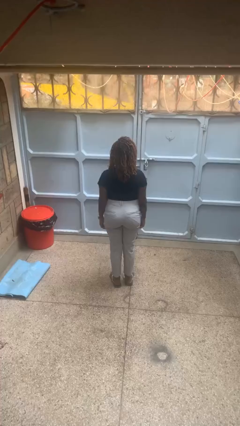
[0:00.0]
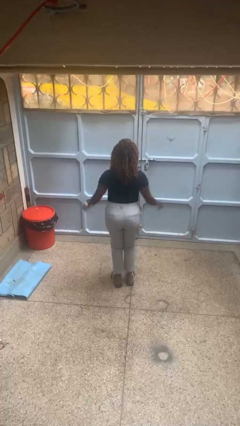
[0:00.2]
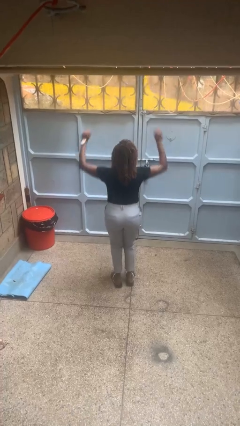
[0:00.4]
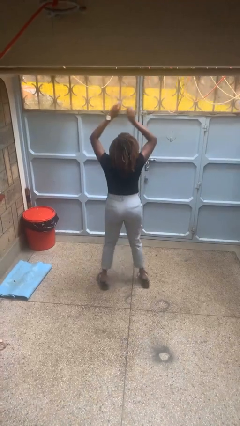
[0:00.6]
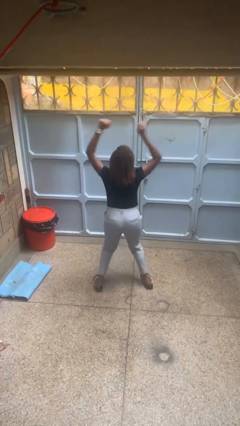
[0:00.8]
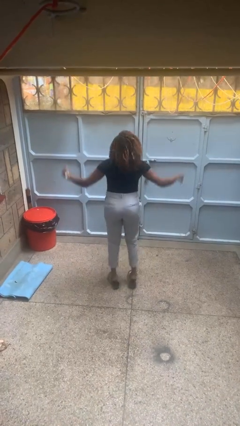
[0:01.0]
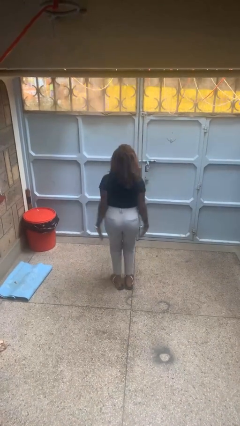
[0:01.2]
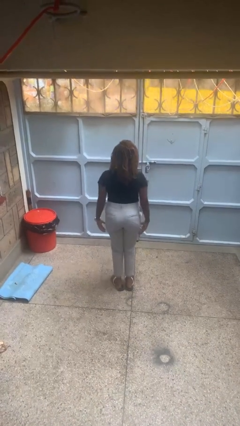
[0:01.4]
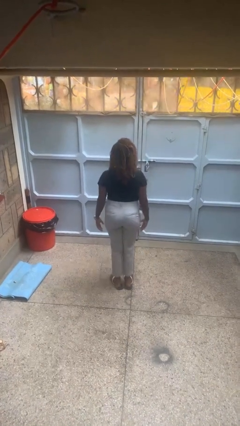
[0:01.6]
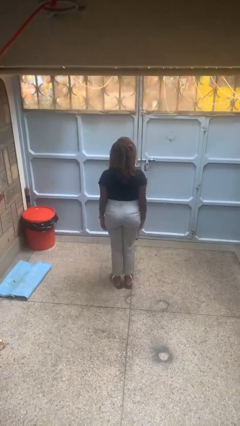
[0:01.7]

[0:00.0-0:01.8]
person exercises with jumping jacks

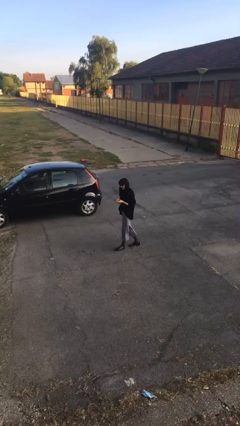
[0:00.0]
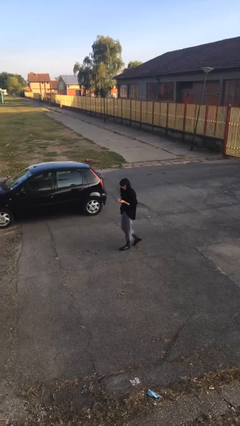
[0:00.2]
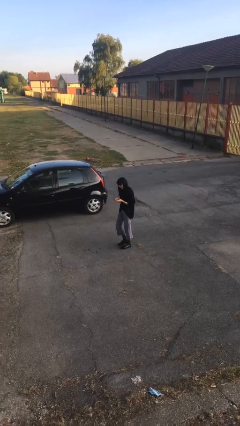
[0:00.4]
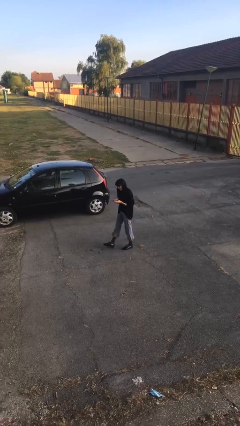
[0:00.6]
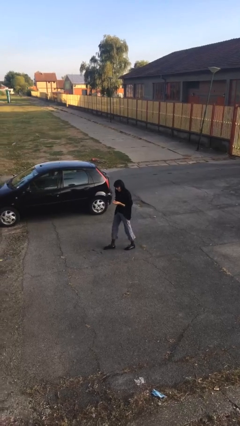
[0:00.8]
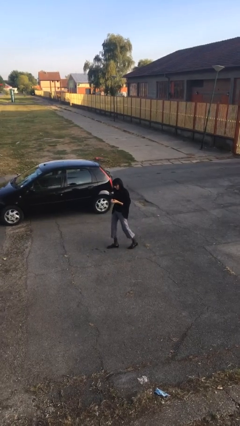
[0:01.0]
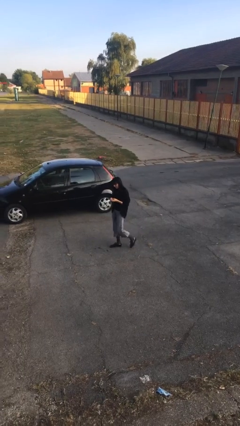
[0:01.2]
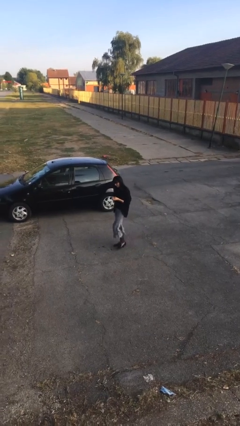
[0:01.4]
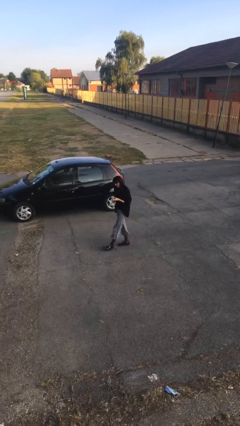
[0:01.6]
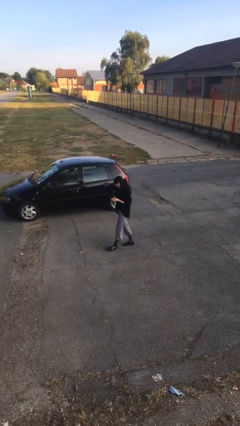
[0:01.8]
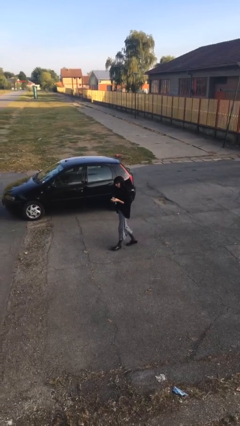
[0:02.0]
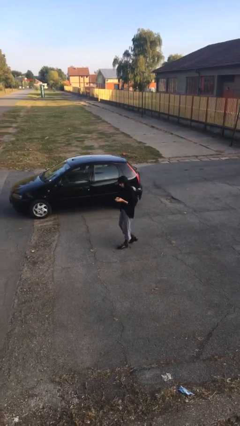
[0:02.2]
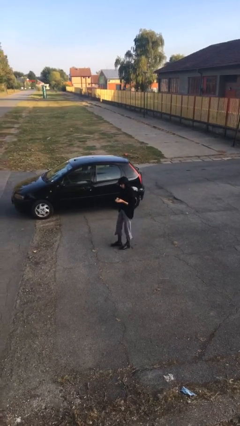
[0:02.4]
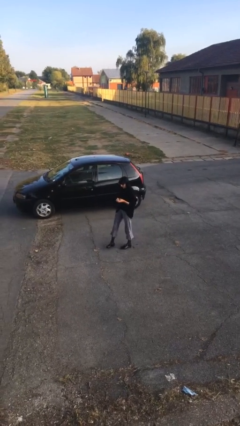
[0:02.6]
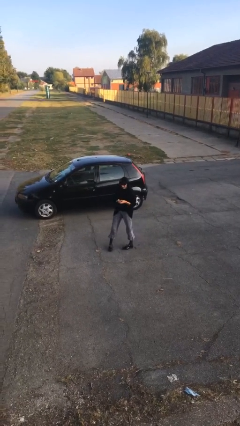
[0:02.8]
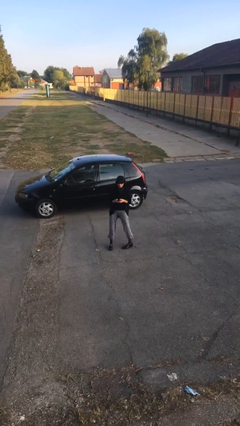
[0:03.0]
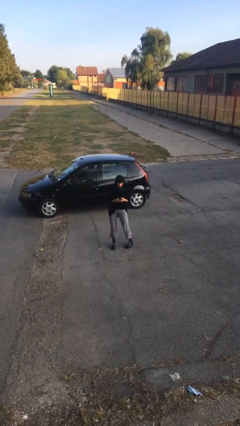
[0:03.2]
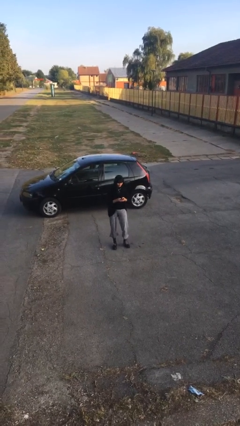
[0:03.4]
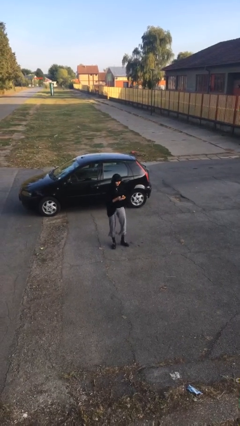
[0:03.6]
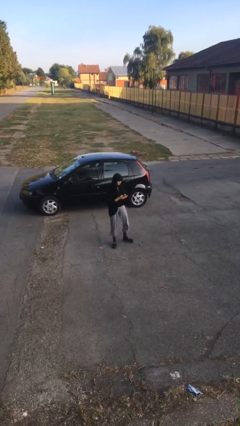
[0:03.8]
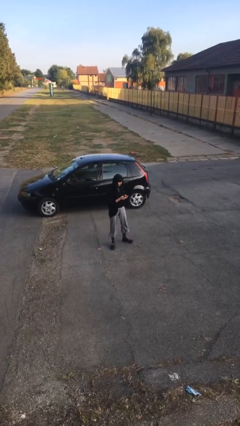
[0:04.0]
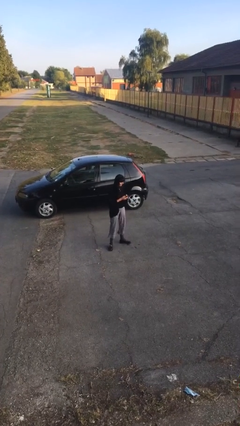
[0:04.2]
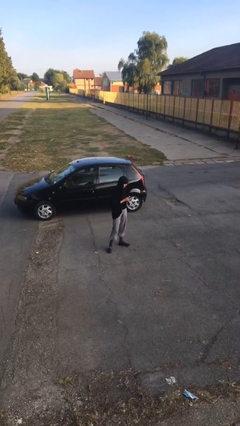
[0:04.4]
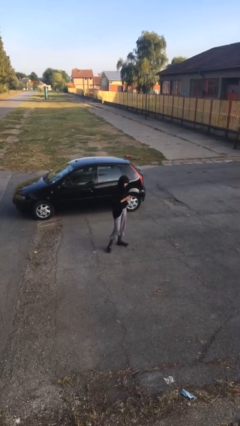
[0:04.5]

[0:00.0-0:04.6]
person texts on phone

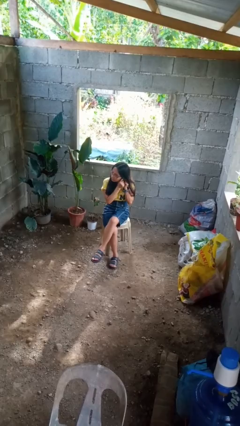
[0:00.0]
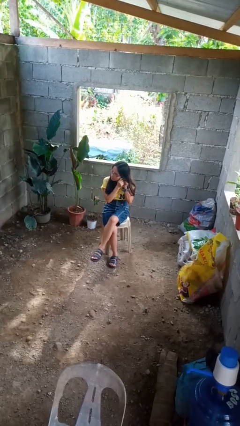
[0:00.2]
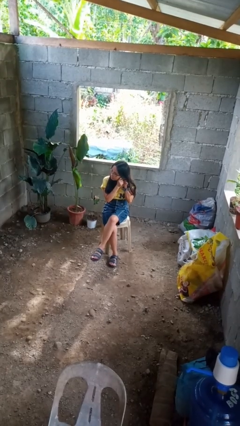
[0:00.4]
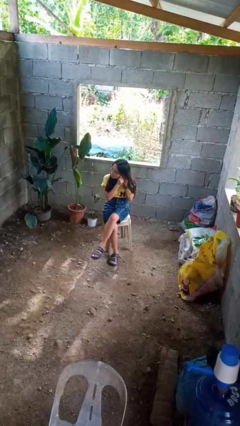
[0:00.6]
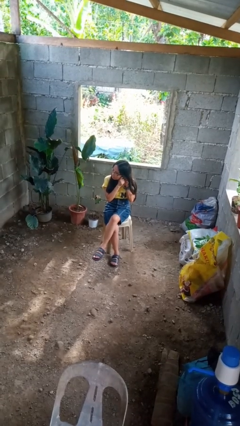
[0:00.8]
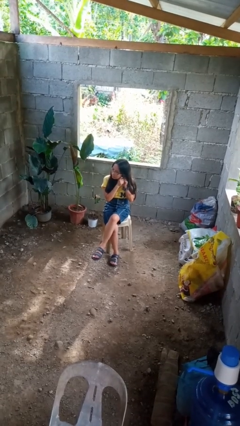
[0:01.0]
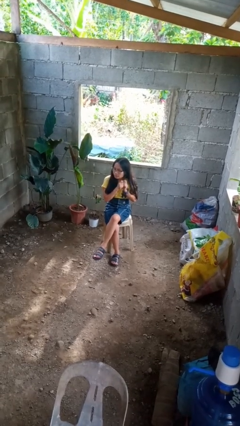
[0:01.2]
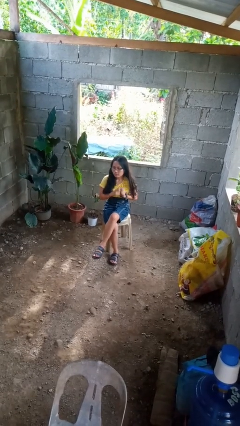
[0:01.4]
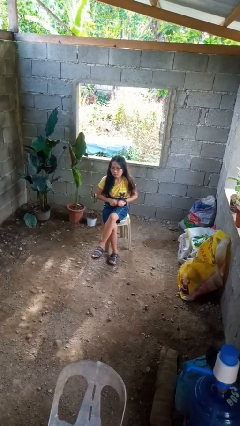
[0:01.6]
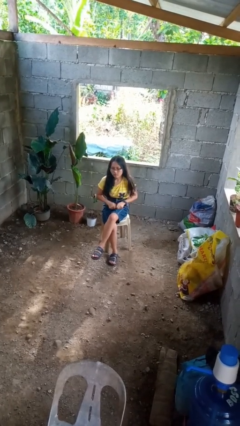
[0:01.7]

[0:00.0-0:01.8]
person takes off earrings

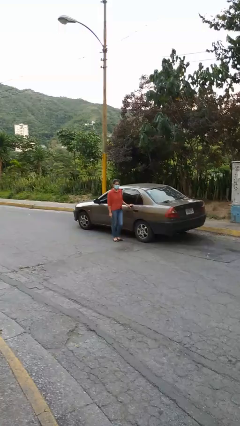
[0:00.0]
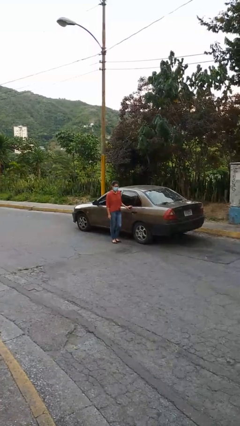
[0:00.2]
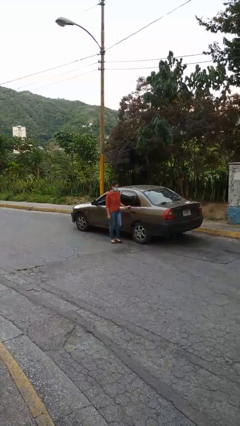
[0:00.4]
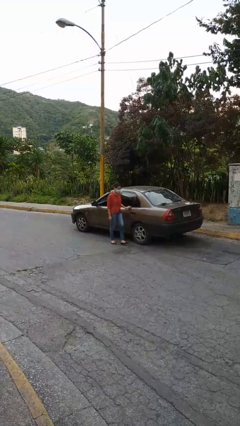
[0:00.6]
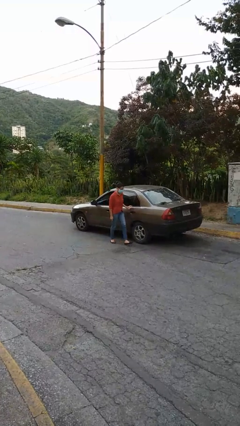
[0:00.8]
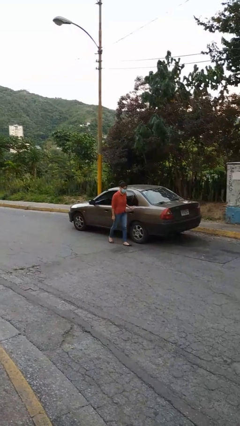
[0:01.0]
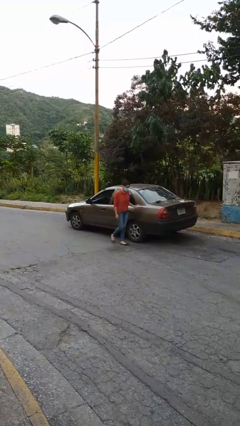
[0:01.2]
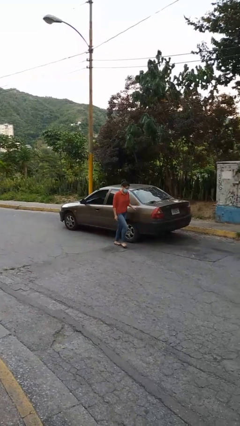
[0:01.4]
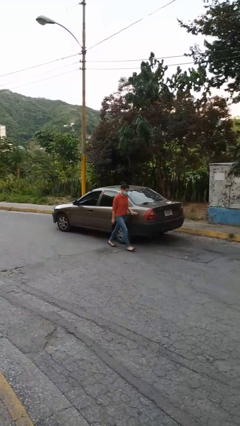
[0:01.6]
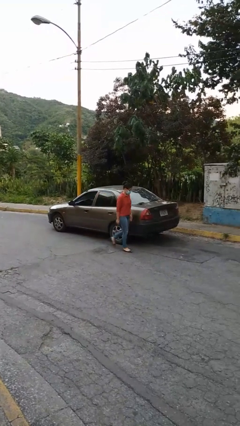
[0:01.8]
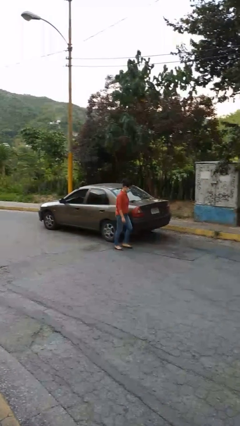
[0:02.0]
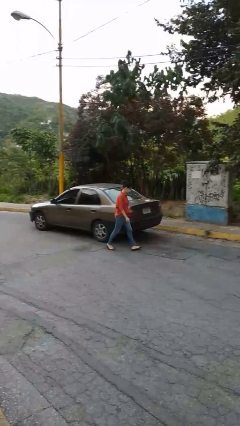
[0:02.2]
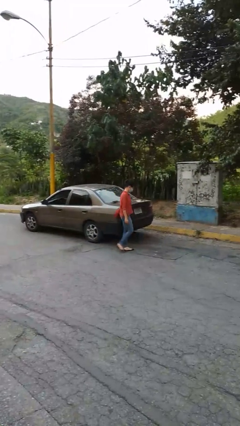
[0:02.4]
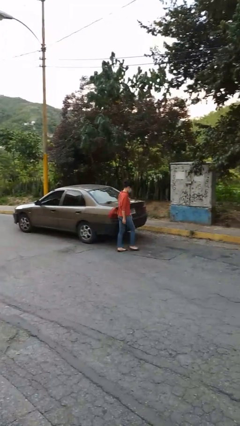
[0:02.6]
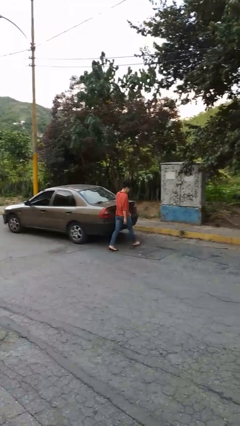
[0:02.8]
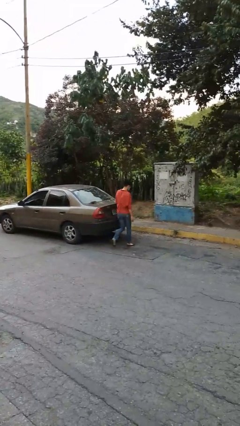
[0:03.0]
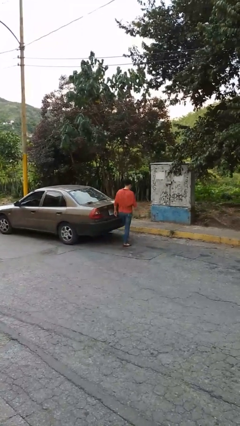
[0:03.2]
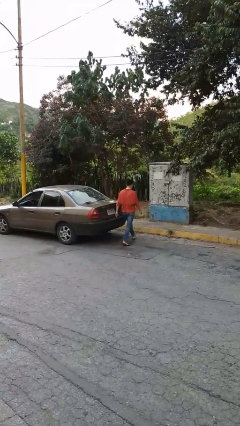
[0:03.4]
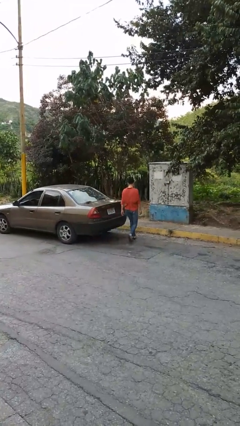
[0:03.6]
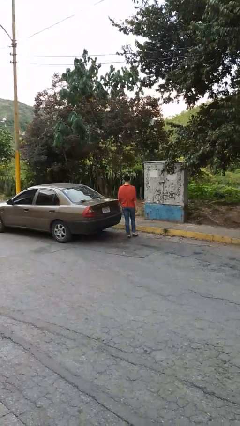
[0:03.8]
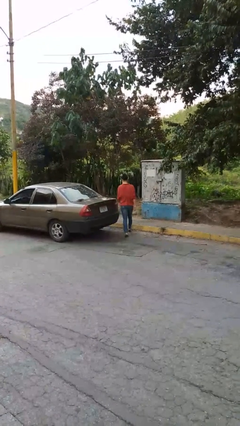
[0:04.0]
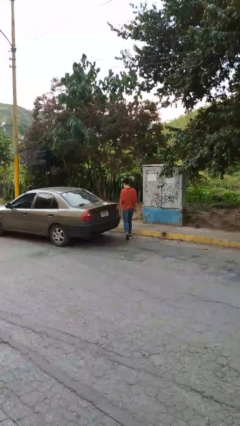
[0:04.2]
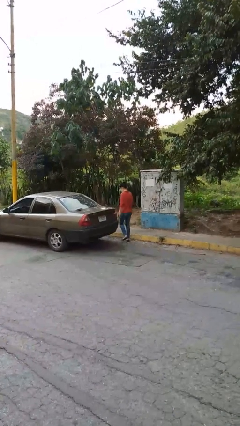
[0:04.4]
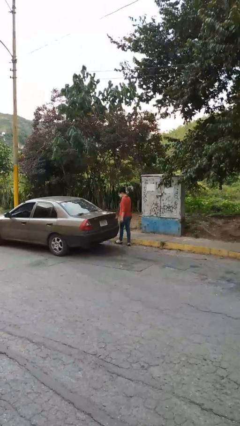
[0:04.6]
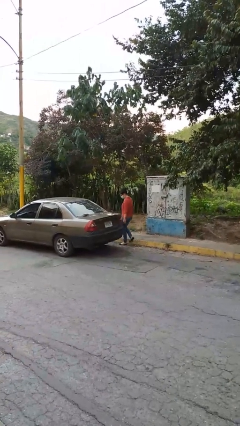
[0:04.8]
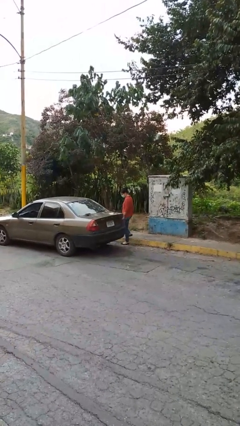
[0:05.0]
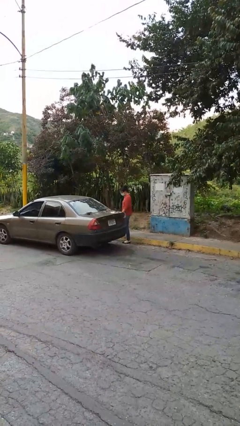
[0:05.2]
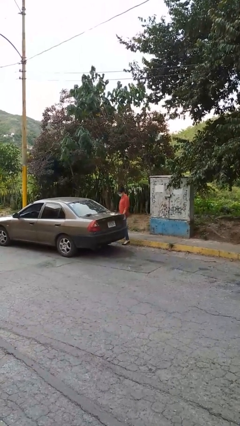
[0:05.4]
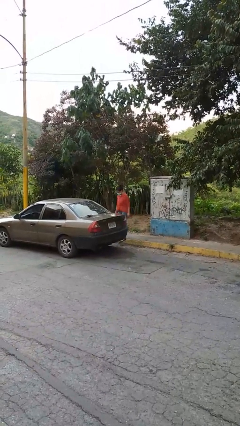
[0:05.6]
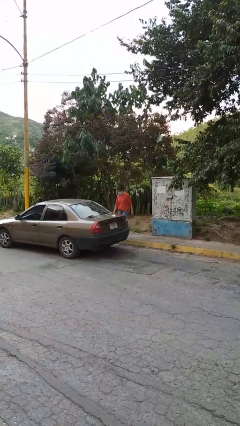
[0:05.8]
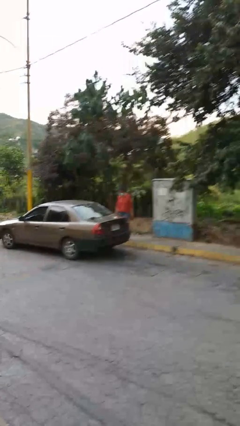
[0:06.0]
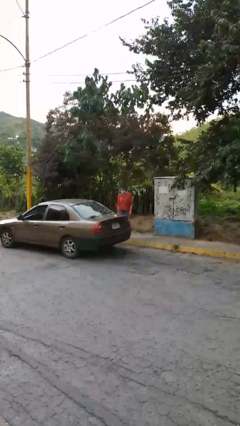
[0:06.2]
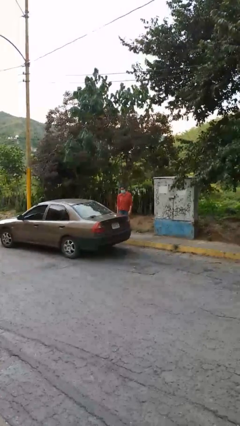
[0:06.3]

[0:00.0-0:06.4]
person walks around car

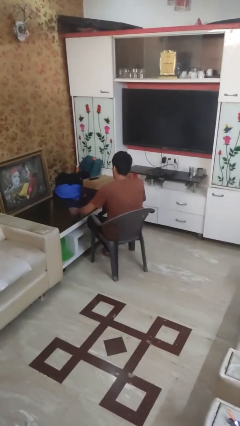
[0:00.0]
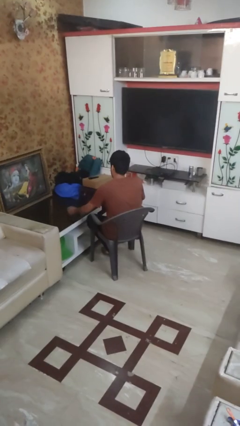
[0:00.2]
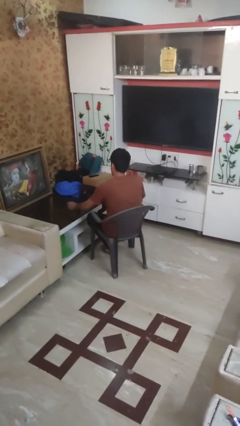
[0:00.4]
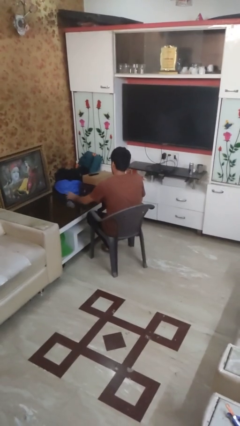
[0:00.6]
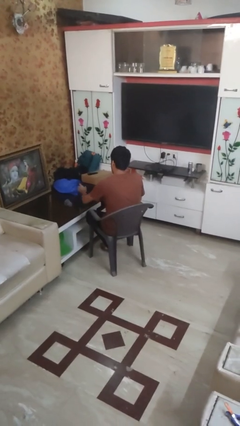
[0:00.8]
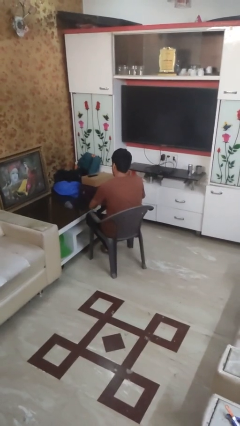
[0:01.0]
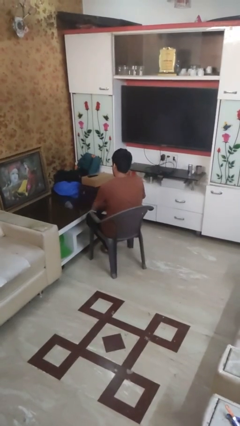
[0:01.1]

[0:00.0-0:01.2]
person knocks over glass

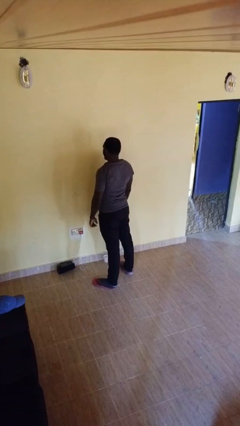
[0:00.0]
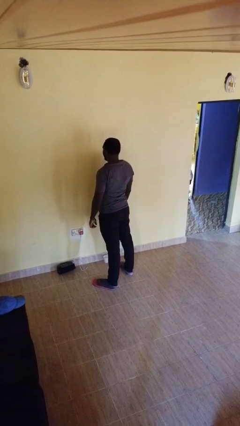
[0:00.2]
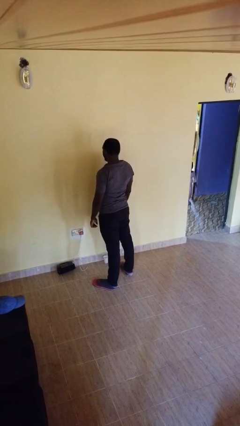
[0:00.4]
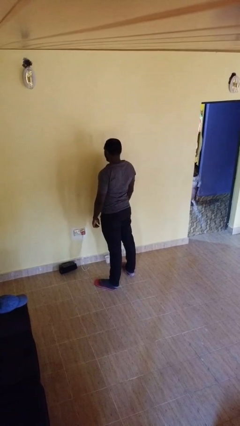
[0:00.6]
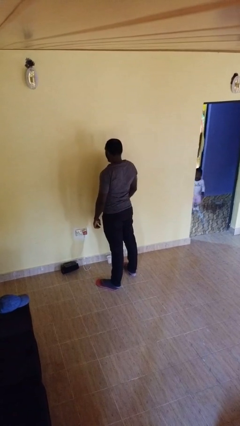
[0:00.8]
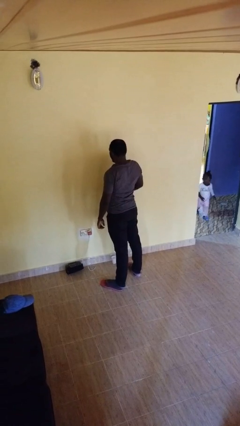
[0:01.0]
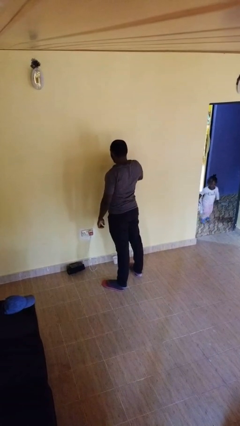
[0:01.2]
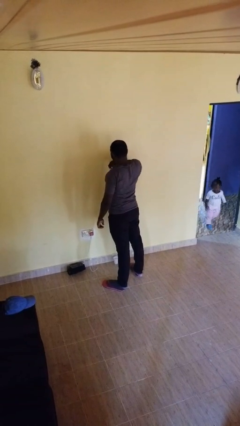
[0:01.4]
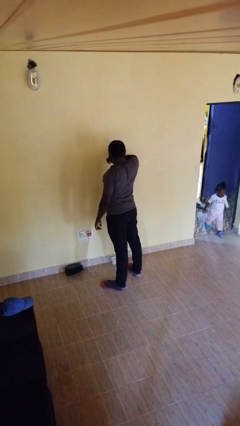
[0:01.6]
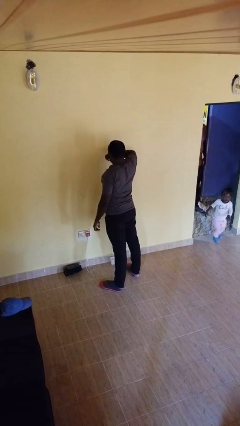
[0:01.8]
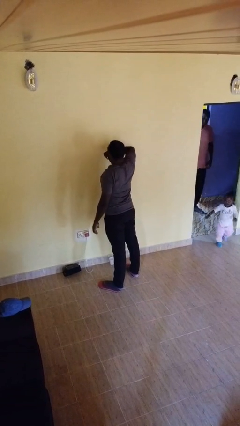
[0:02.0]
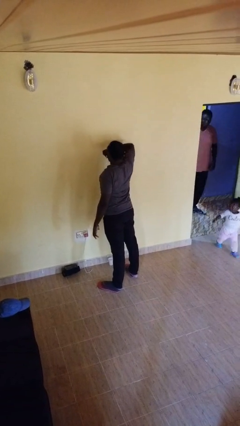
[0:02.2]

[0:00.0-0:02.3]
person yawns
